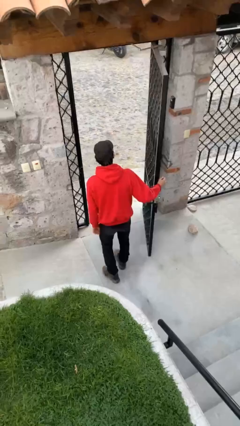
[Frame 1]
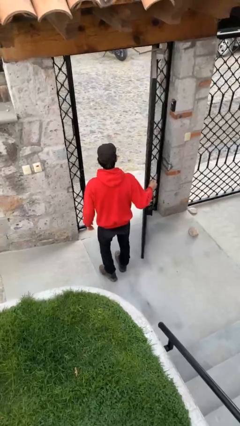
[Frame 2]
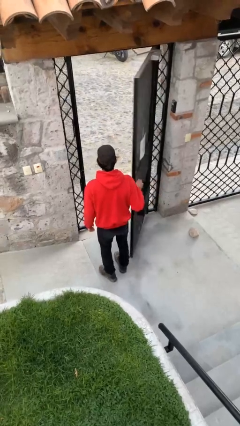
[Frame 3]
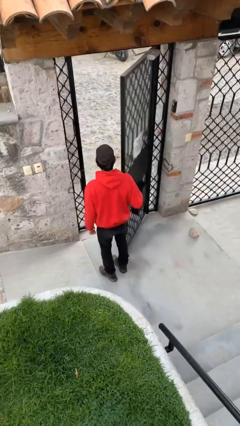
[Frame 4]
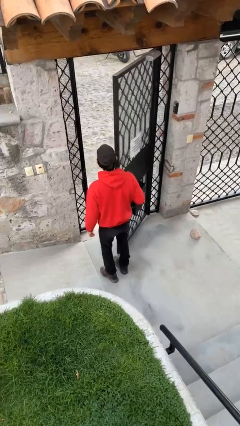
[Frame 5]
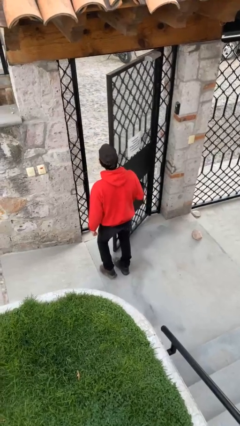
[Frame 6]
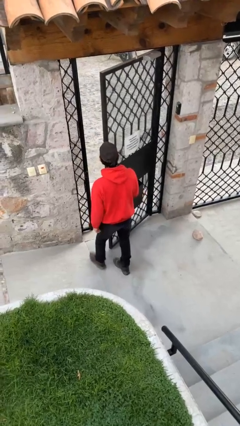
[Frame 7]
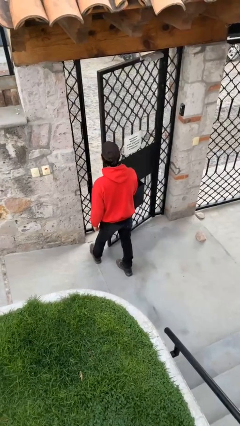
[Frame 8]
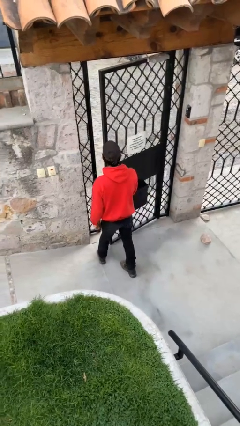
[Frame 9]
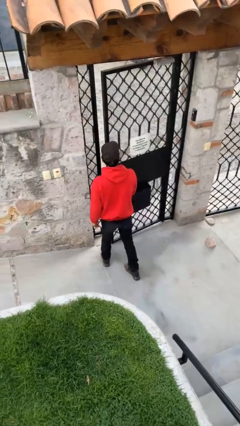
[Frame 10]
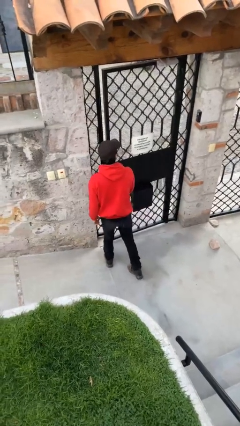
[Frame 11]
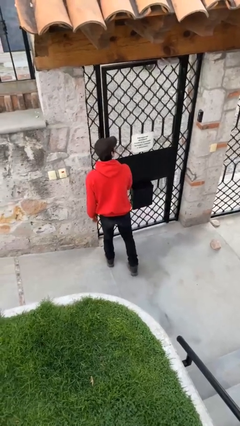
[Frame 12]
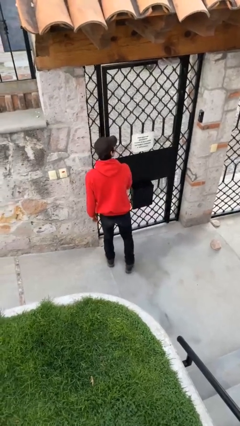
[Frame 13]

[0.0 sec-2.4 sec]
person closes facility door

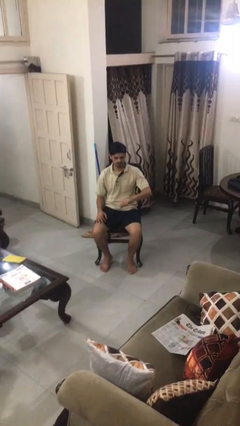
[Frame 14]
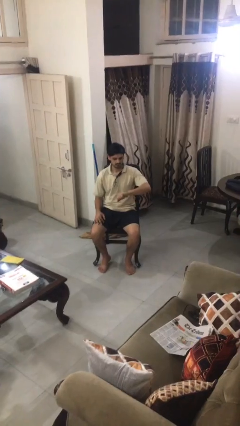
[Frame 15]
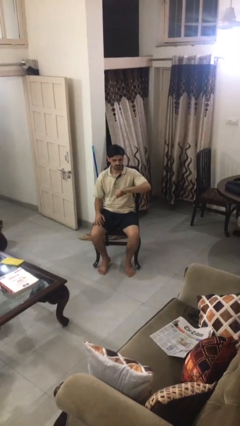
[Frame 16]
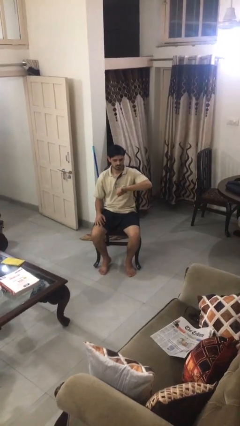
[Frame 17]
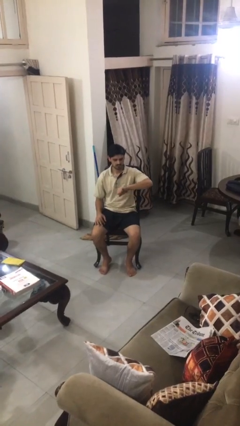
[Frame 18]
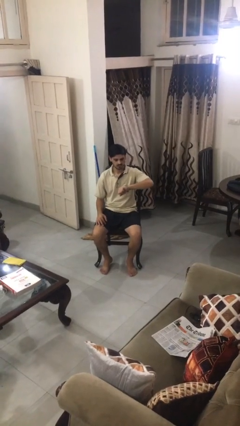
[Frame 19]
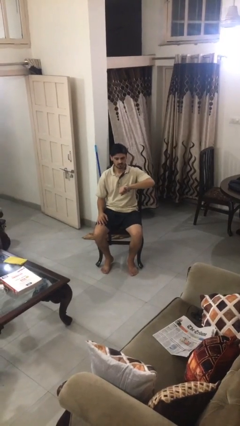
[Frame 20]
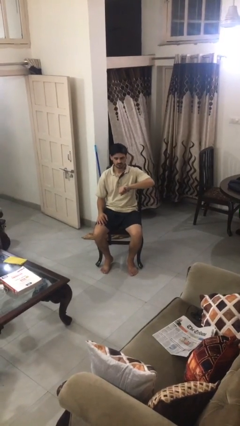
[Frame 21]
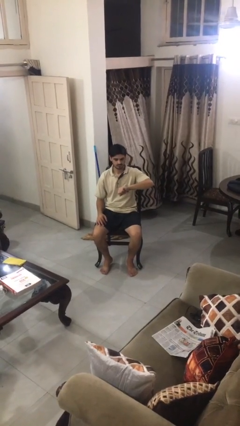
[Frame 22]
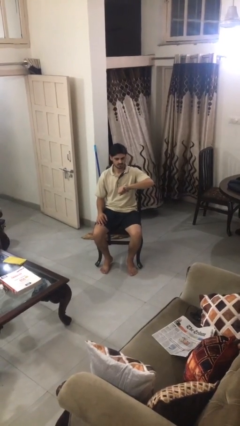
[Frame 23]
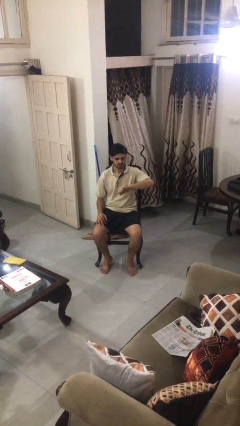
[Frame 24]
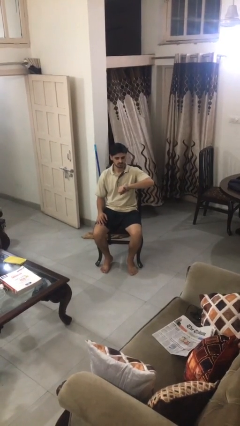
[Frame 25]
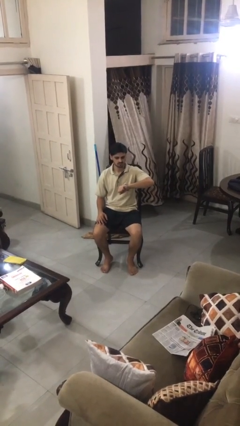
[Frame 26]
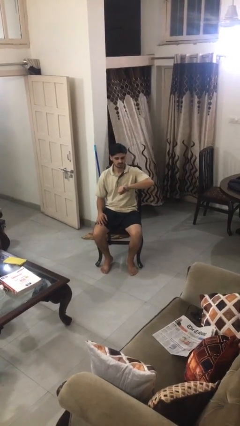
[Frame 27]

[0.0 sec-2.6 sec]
person looks at wristwatch

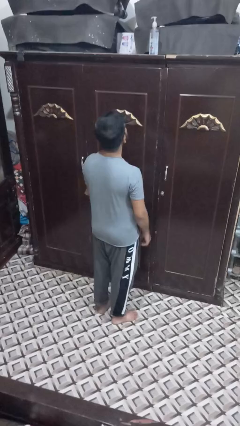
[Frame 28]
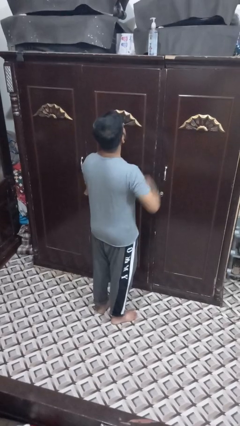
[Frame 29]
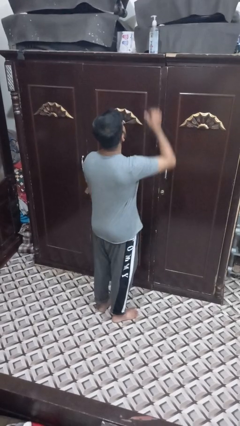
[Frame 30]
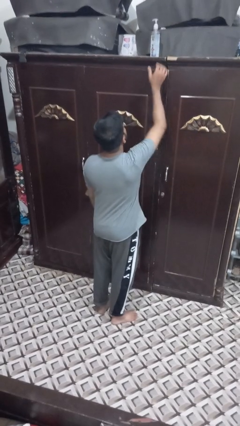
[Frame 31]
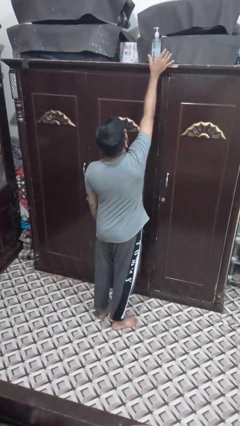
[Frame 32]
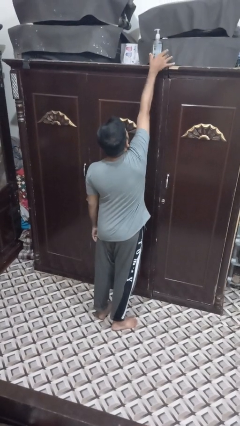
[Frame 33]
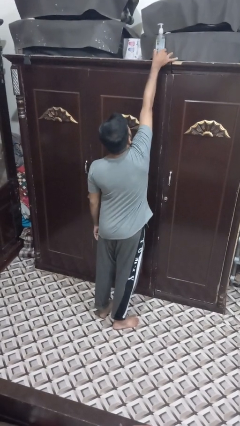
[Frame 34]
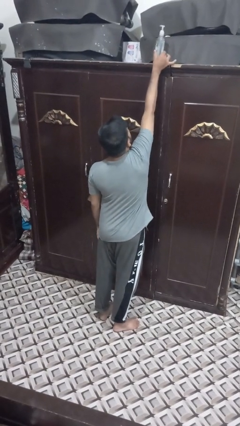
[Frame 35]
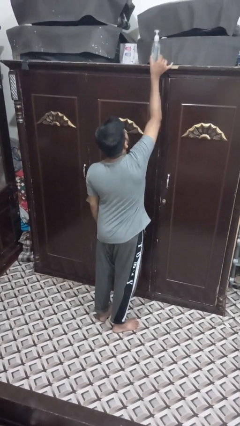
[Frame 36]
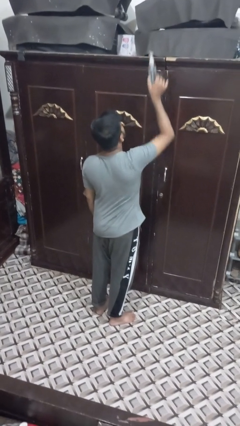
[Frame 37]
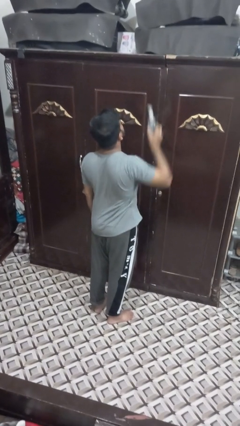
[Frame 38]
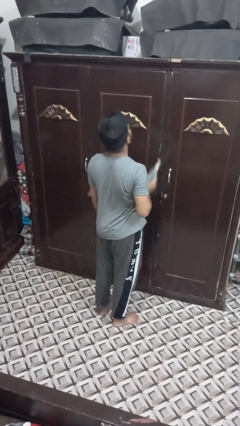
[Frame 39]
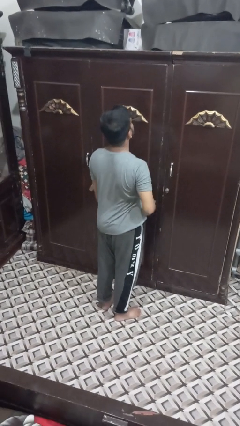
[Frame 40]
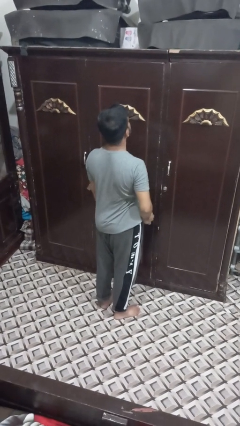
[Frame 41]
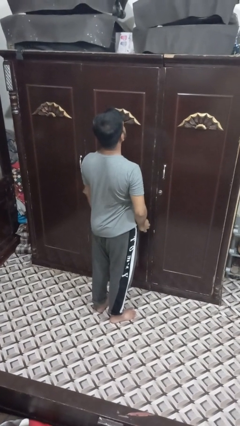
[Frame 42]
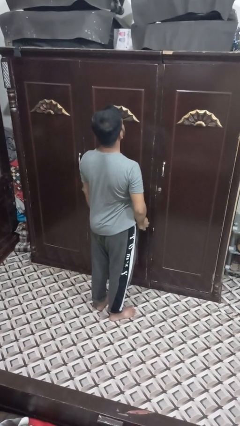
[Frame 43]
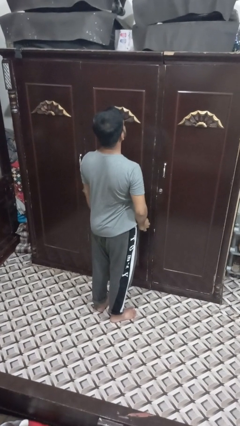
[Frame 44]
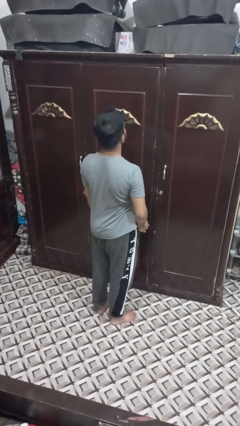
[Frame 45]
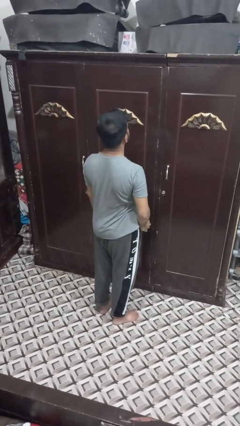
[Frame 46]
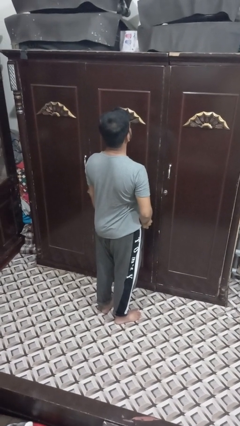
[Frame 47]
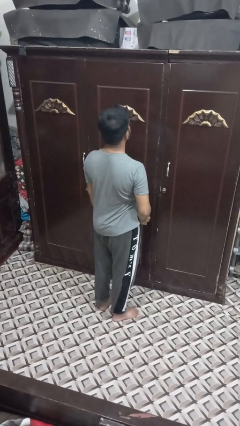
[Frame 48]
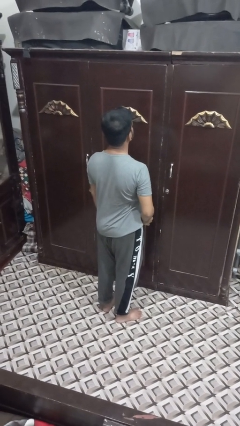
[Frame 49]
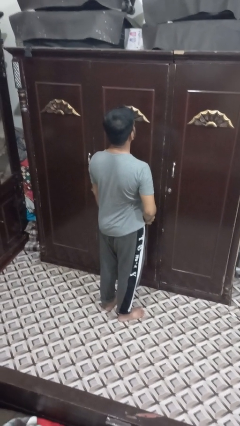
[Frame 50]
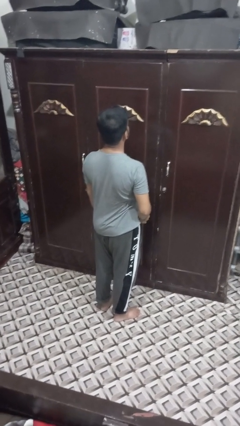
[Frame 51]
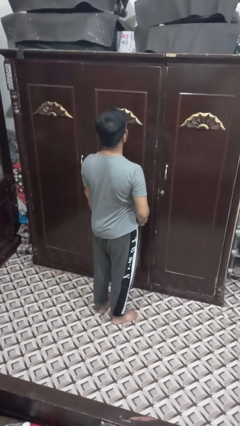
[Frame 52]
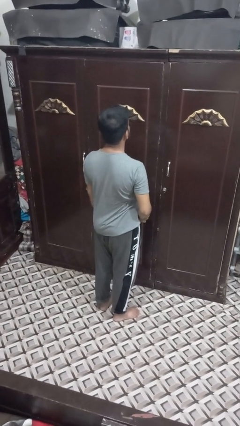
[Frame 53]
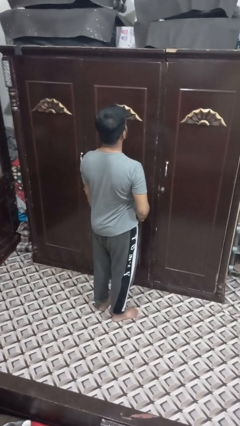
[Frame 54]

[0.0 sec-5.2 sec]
person picks up object from shelf

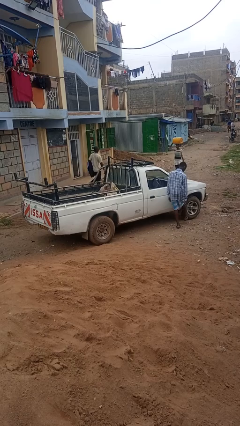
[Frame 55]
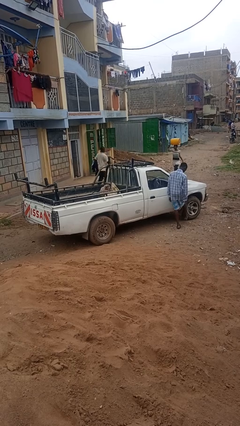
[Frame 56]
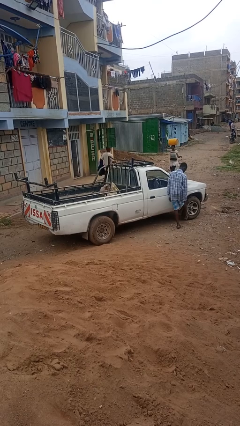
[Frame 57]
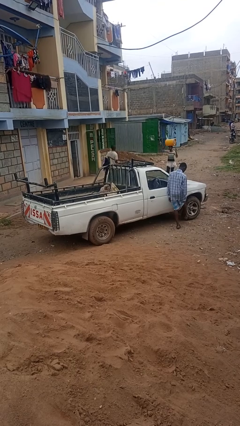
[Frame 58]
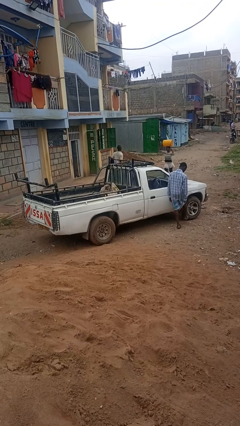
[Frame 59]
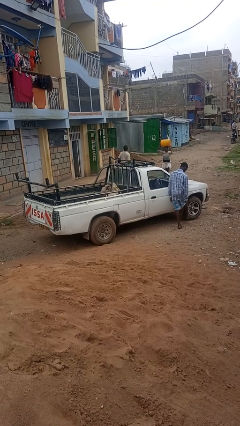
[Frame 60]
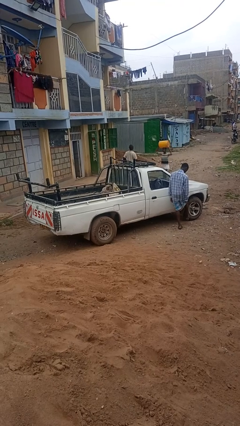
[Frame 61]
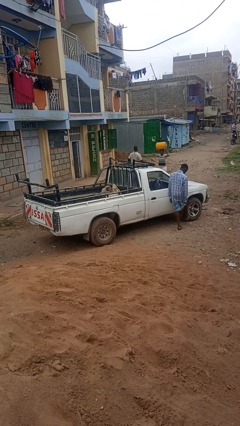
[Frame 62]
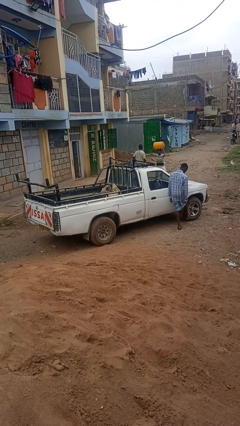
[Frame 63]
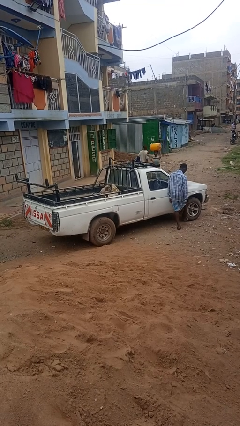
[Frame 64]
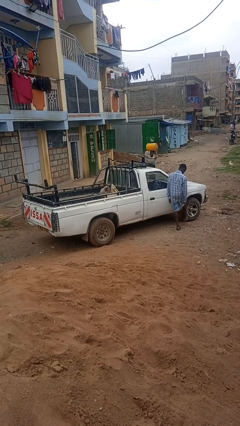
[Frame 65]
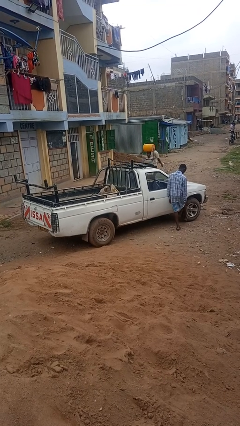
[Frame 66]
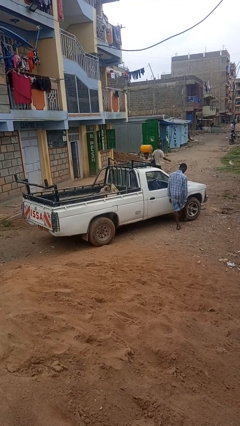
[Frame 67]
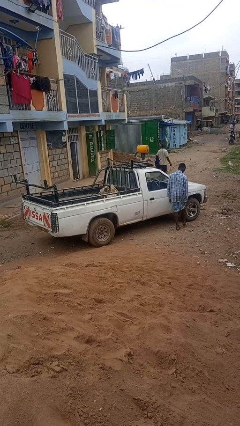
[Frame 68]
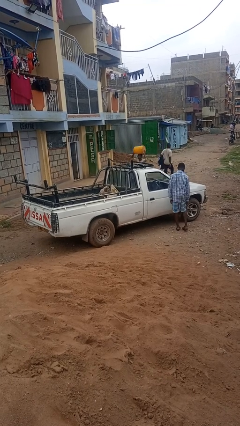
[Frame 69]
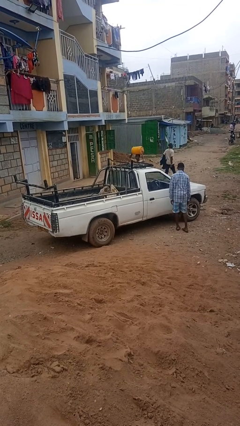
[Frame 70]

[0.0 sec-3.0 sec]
person kicks car tires

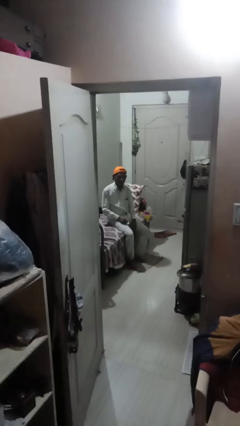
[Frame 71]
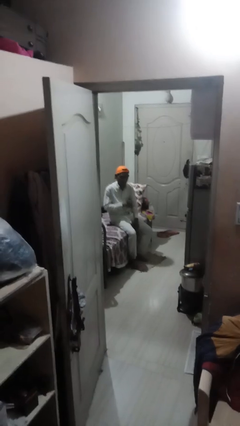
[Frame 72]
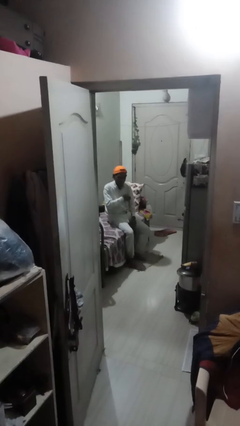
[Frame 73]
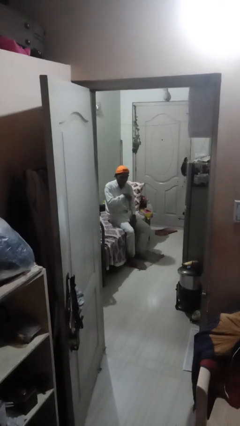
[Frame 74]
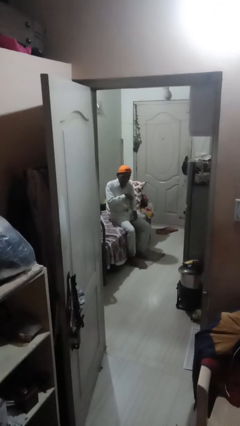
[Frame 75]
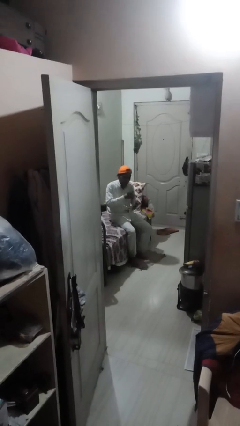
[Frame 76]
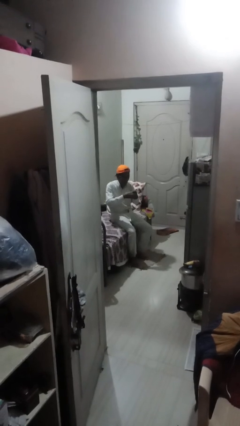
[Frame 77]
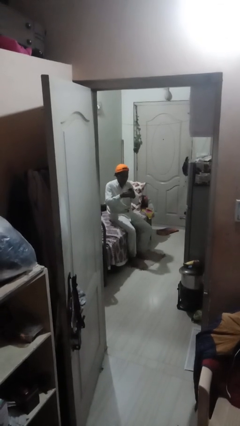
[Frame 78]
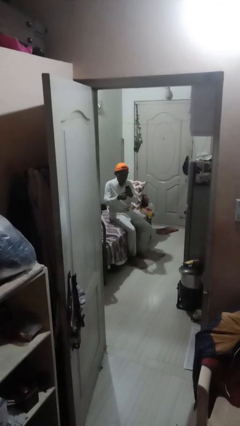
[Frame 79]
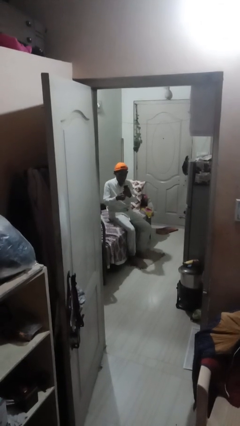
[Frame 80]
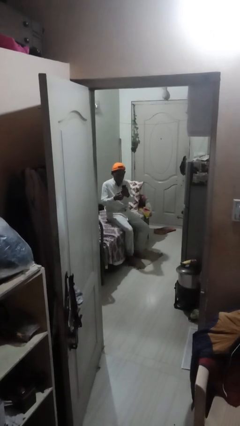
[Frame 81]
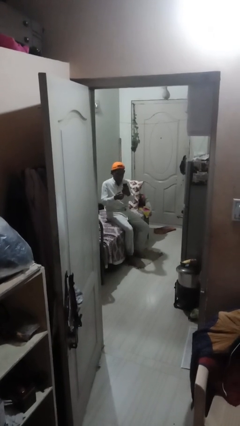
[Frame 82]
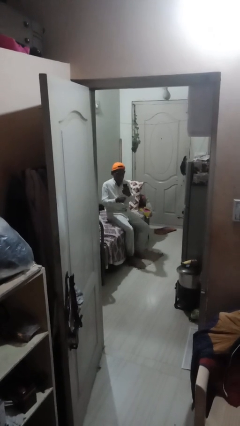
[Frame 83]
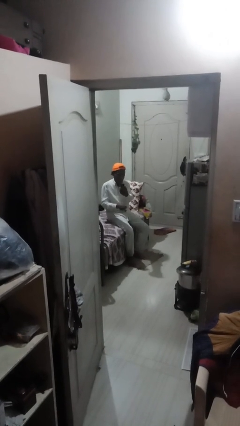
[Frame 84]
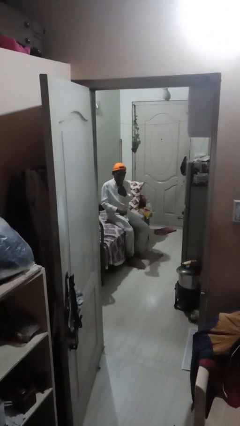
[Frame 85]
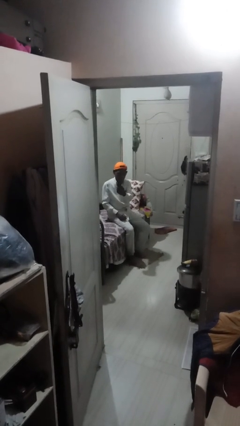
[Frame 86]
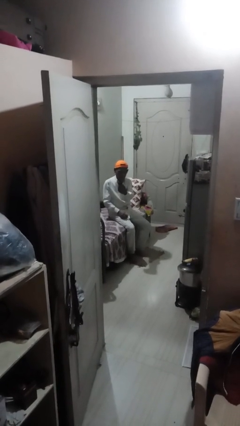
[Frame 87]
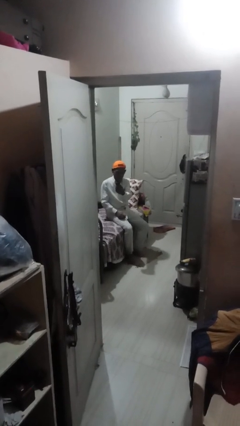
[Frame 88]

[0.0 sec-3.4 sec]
person takes phone from pocket

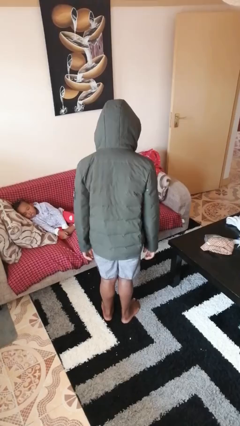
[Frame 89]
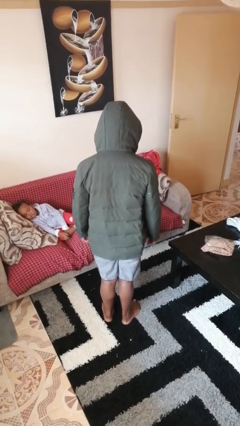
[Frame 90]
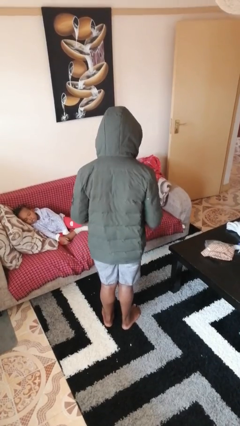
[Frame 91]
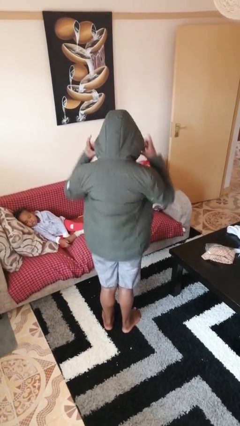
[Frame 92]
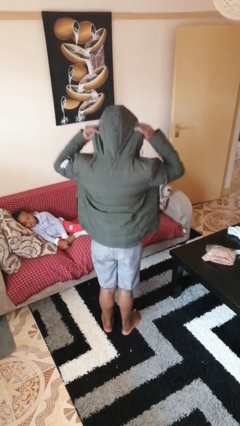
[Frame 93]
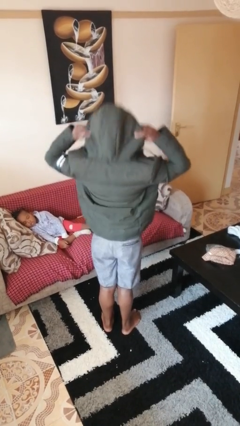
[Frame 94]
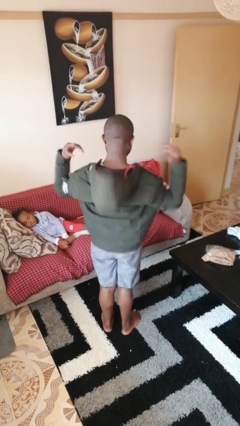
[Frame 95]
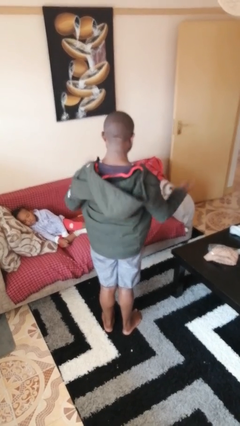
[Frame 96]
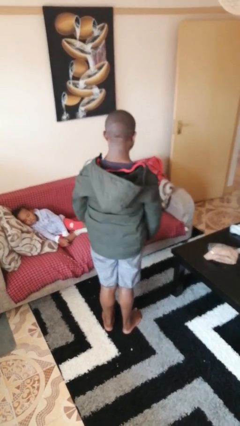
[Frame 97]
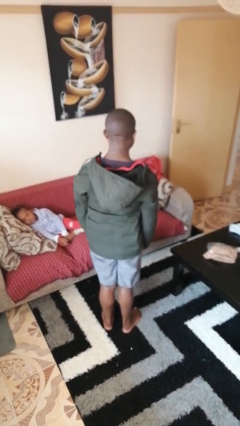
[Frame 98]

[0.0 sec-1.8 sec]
person takes off hoodie
